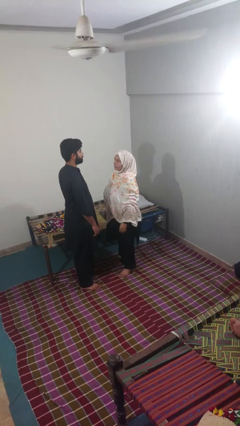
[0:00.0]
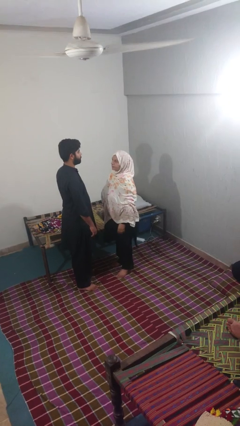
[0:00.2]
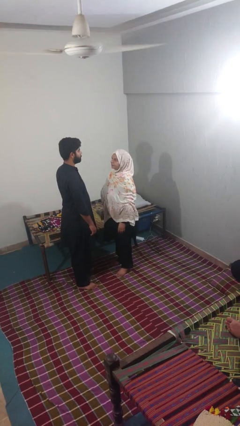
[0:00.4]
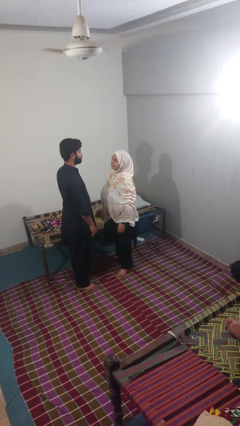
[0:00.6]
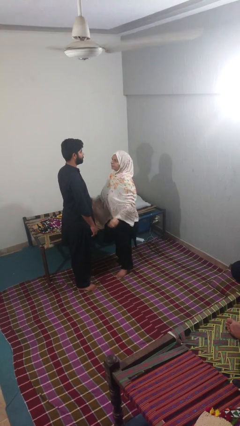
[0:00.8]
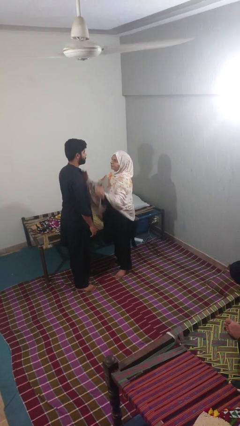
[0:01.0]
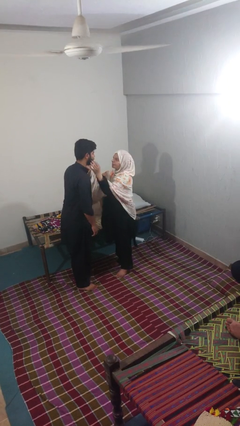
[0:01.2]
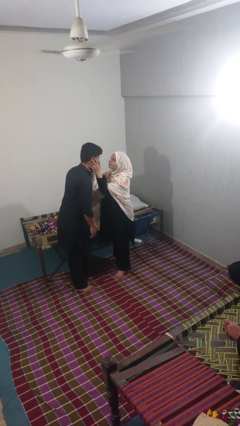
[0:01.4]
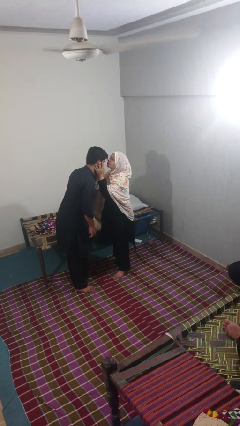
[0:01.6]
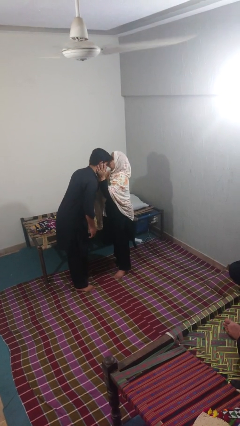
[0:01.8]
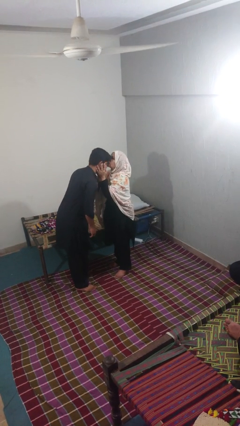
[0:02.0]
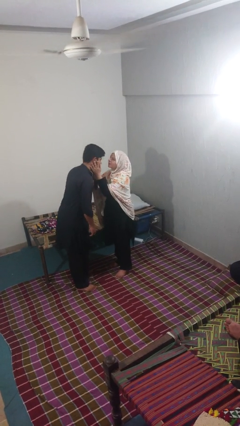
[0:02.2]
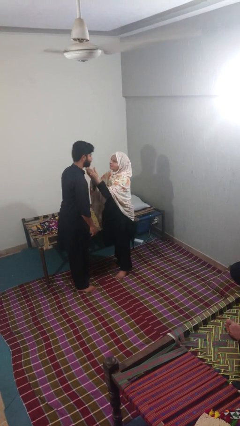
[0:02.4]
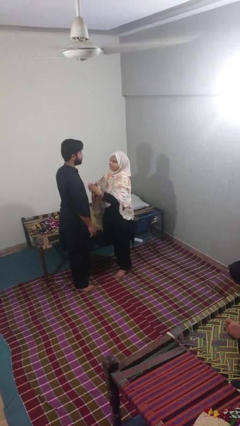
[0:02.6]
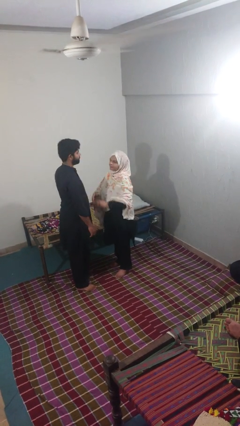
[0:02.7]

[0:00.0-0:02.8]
person kisses cheek of person

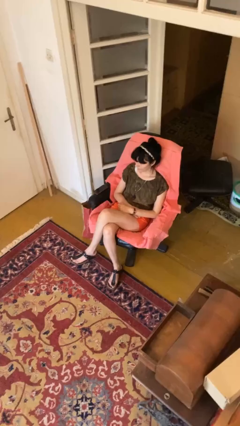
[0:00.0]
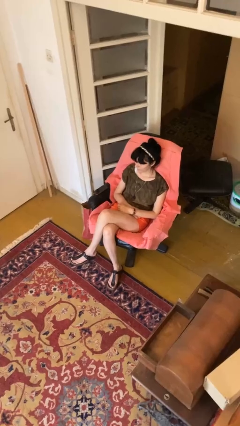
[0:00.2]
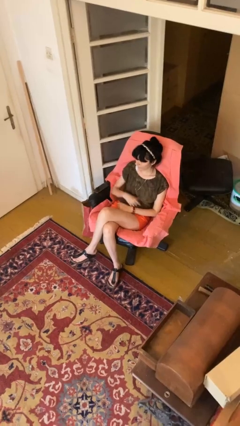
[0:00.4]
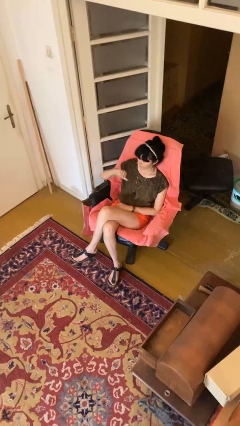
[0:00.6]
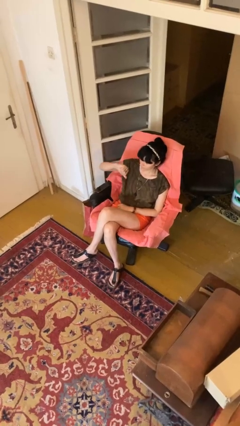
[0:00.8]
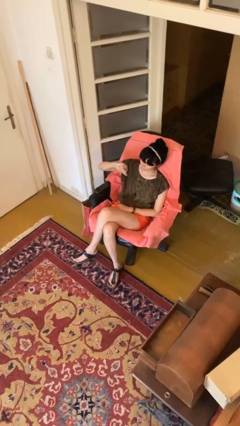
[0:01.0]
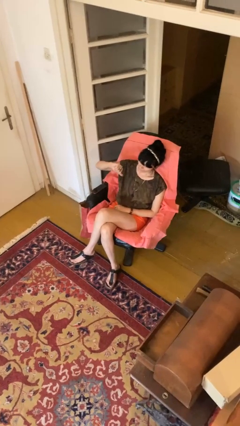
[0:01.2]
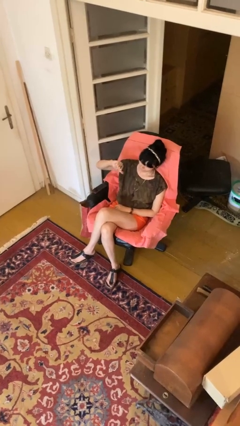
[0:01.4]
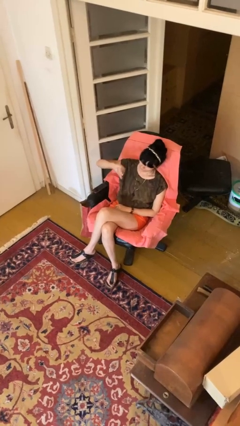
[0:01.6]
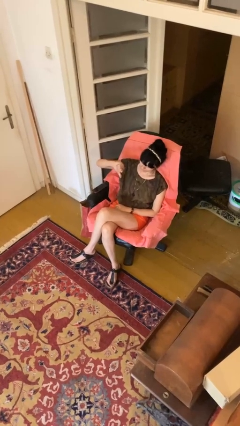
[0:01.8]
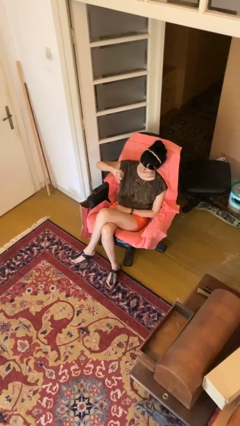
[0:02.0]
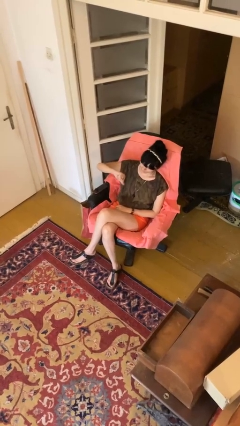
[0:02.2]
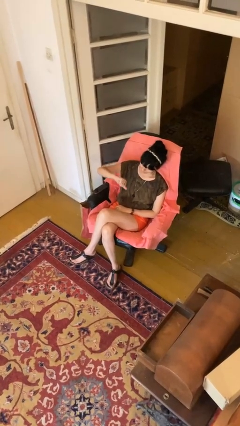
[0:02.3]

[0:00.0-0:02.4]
person gestures thumbs down

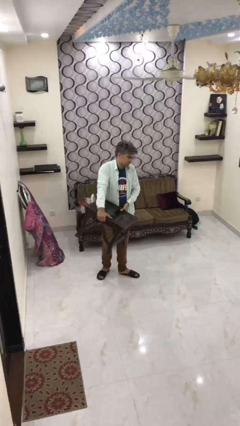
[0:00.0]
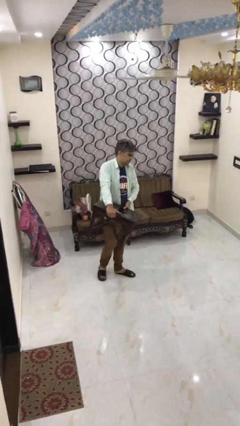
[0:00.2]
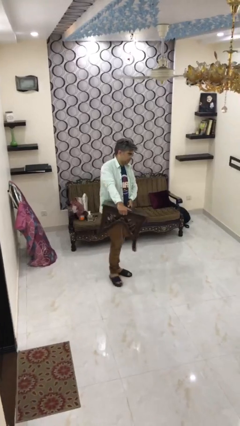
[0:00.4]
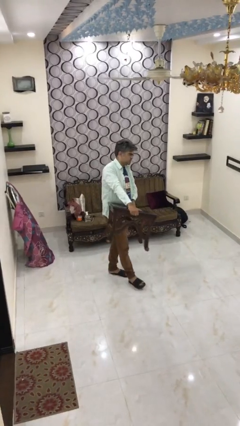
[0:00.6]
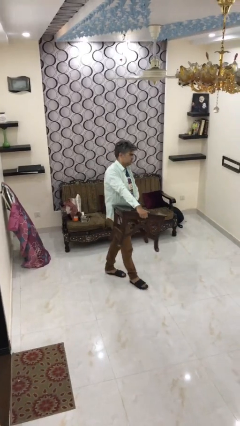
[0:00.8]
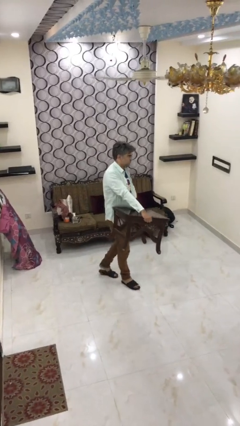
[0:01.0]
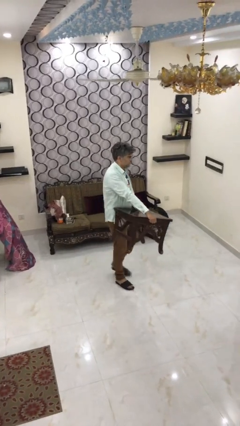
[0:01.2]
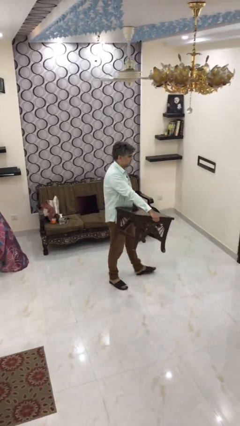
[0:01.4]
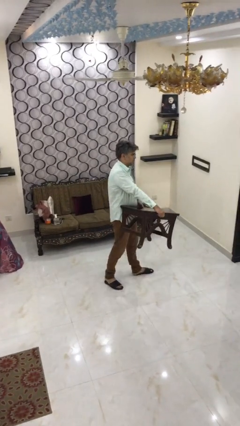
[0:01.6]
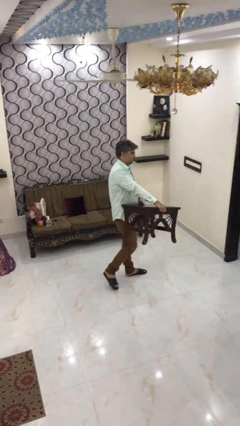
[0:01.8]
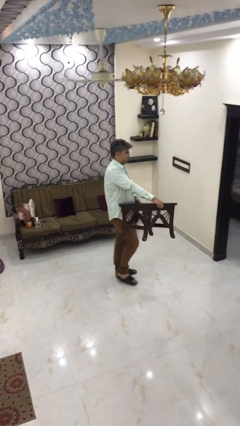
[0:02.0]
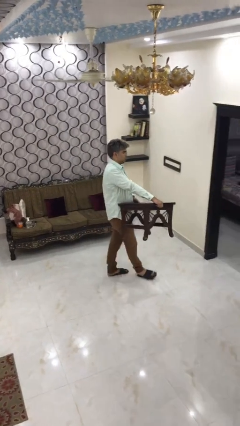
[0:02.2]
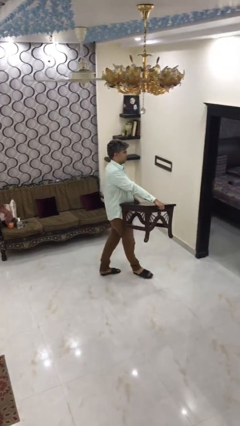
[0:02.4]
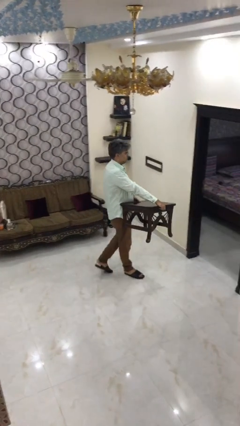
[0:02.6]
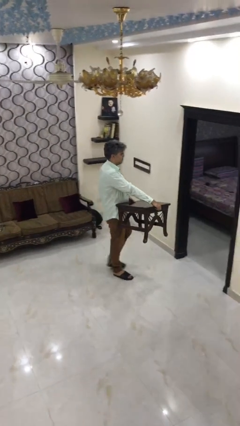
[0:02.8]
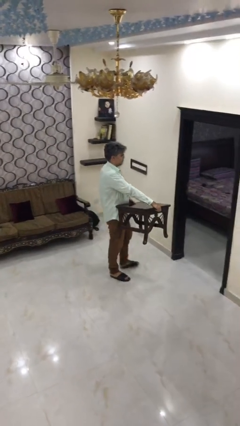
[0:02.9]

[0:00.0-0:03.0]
person carries heavy object

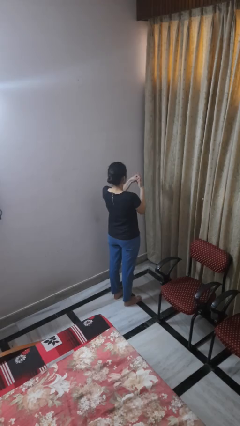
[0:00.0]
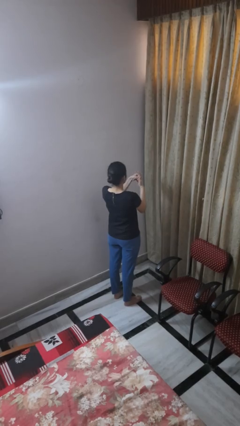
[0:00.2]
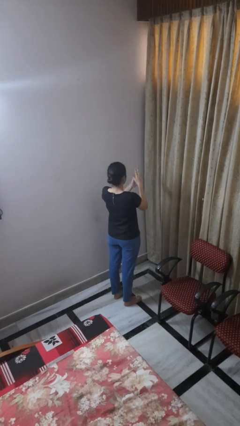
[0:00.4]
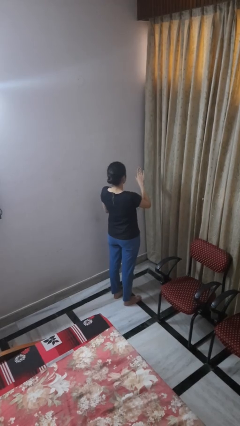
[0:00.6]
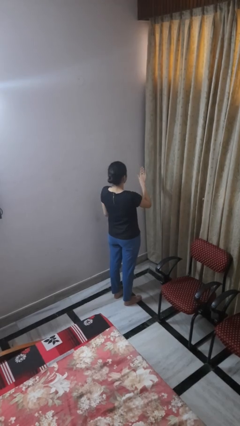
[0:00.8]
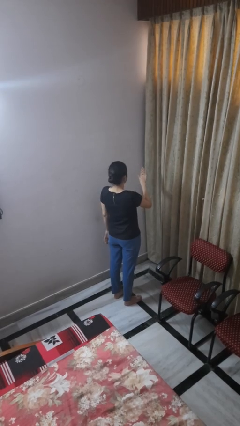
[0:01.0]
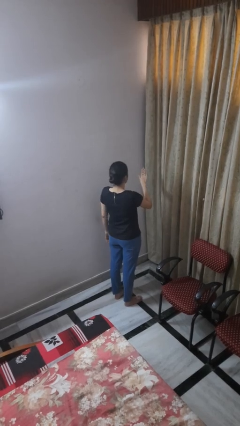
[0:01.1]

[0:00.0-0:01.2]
person puts on ring

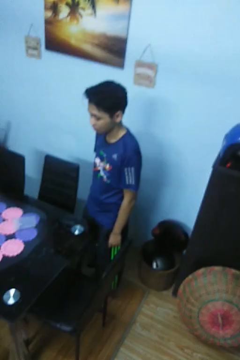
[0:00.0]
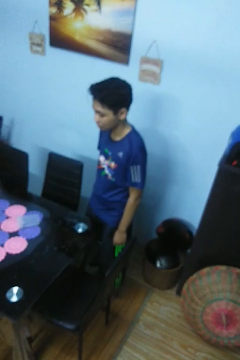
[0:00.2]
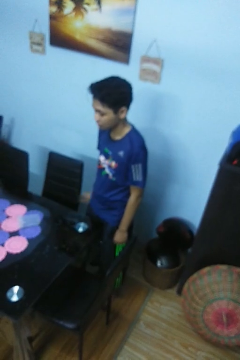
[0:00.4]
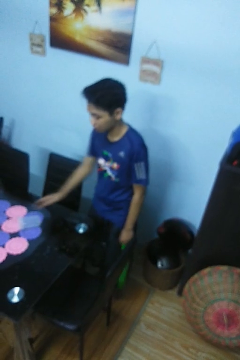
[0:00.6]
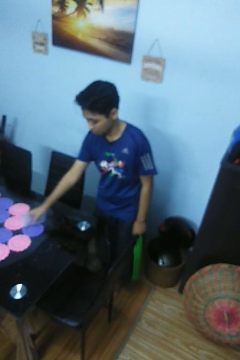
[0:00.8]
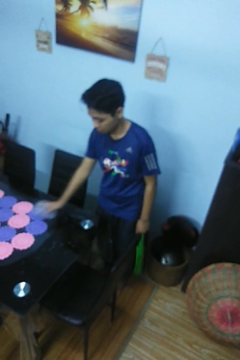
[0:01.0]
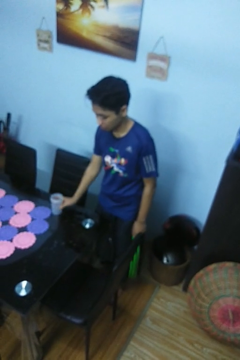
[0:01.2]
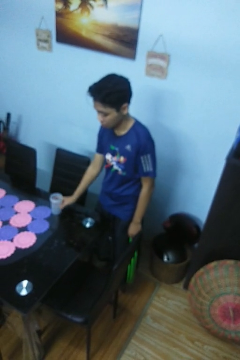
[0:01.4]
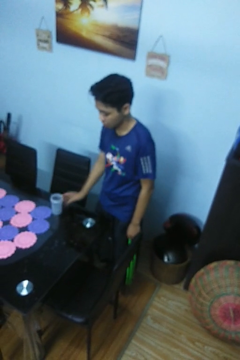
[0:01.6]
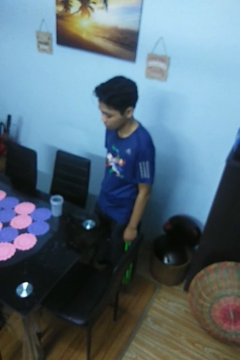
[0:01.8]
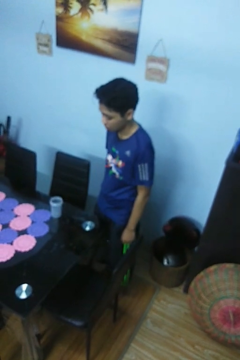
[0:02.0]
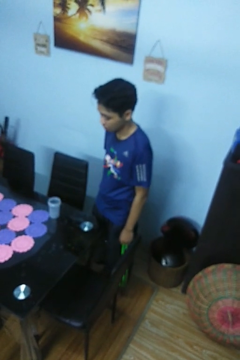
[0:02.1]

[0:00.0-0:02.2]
person sets upright glass

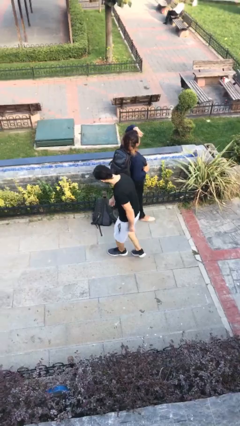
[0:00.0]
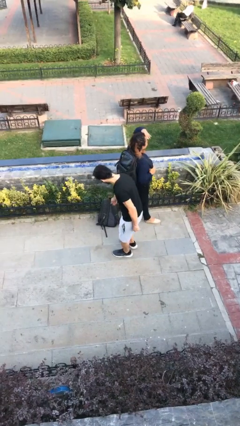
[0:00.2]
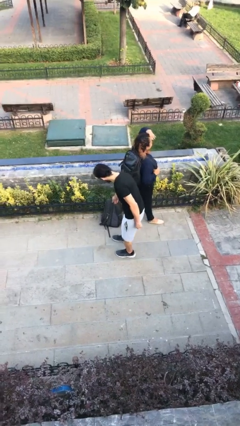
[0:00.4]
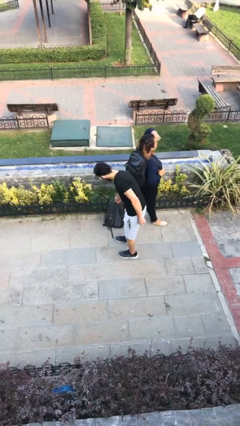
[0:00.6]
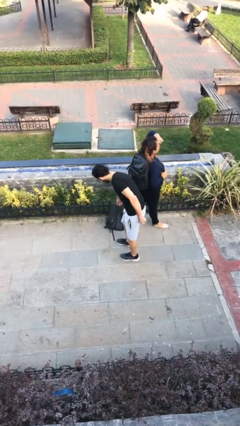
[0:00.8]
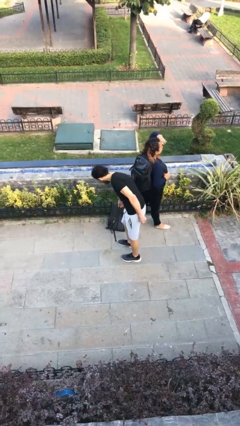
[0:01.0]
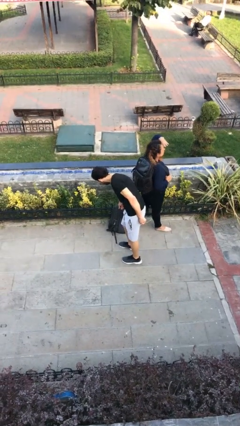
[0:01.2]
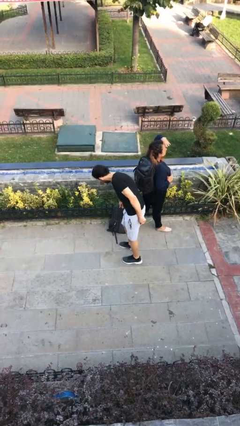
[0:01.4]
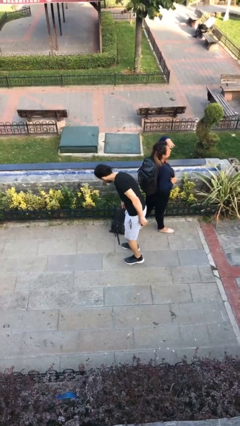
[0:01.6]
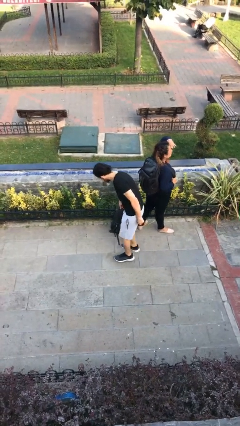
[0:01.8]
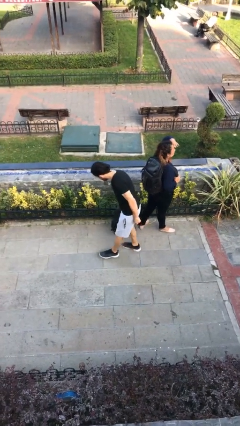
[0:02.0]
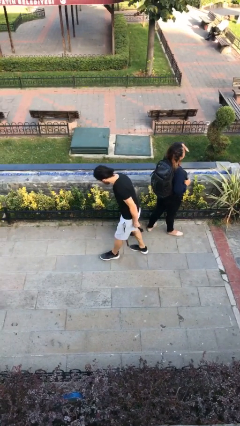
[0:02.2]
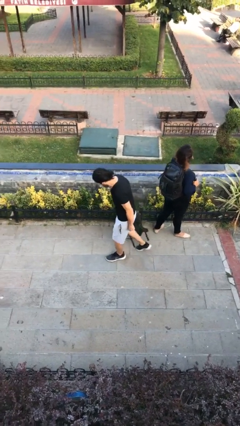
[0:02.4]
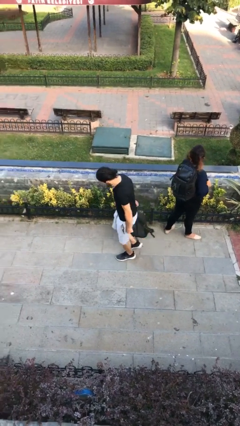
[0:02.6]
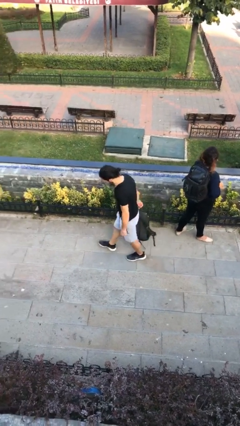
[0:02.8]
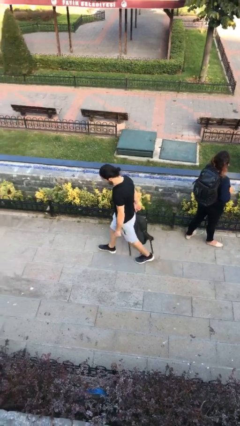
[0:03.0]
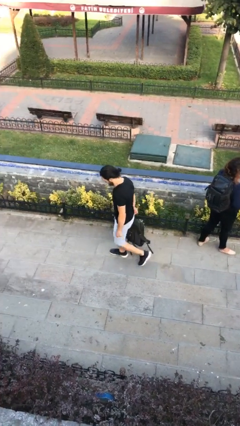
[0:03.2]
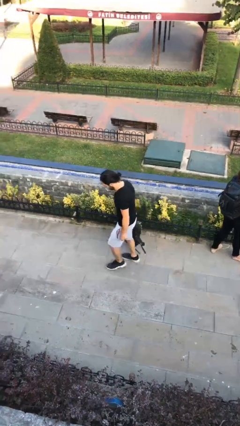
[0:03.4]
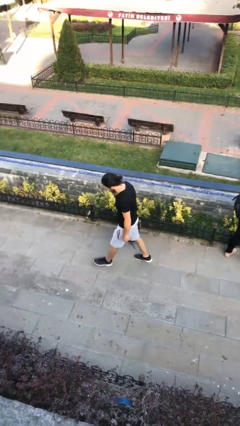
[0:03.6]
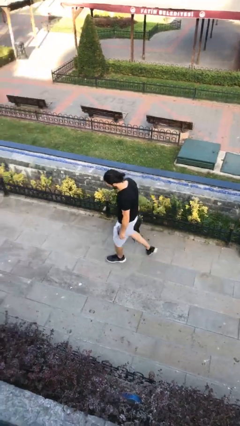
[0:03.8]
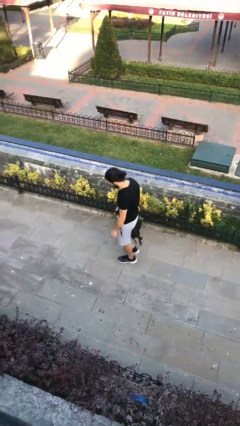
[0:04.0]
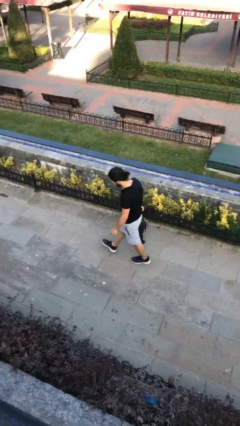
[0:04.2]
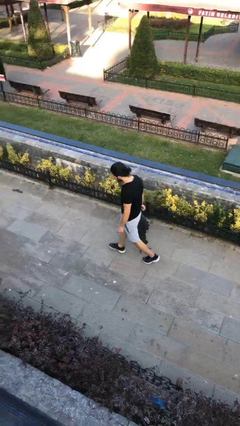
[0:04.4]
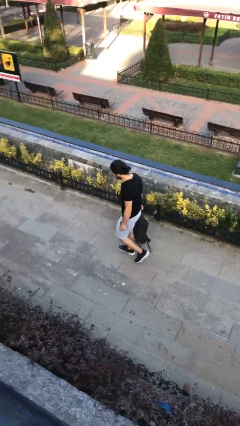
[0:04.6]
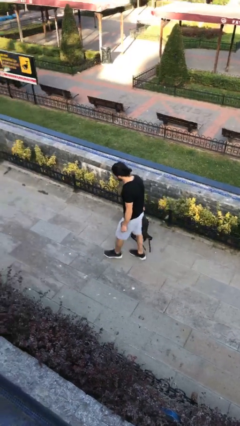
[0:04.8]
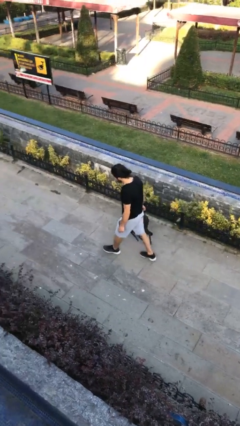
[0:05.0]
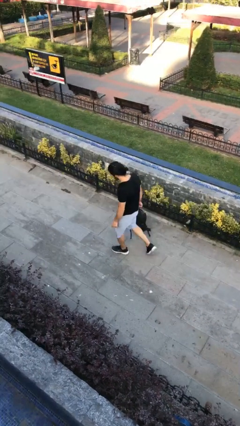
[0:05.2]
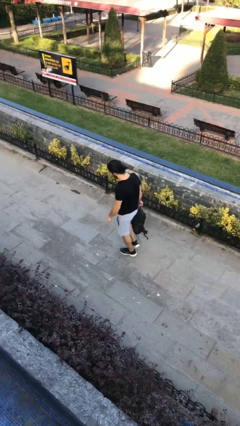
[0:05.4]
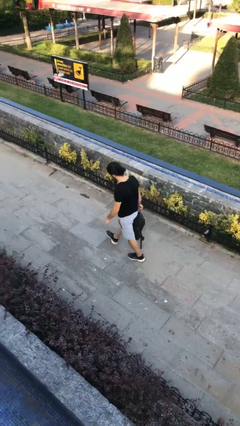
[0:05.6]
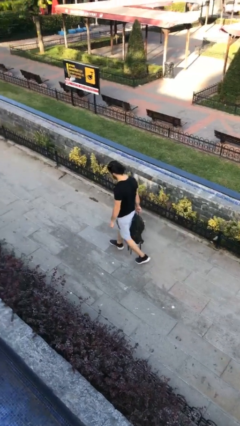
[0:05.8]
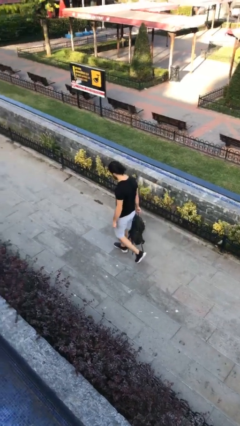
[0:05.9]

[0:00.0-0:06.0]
person steals object from person

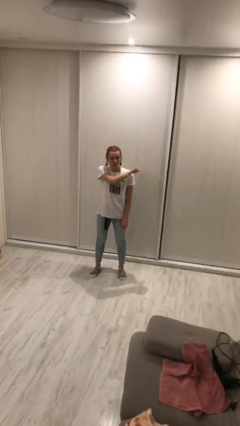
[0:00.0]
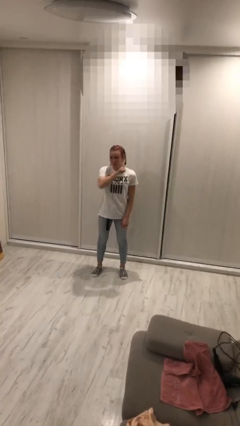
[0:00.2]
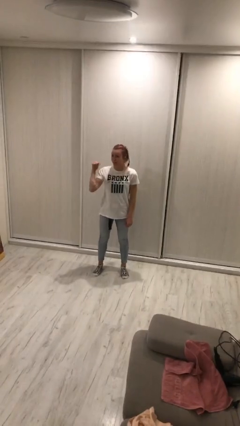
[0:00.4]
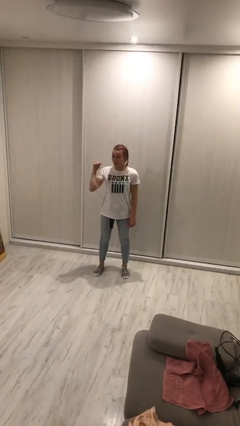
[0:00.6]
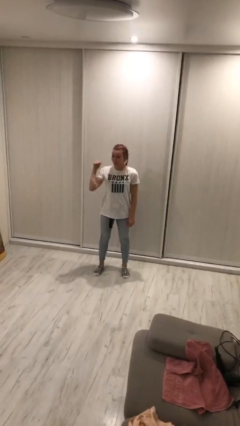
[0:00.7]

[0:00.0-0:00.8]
person gestures cut
